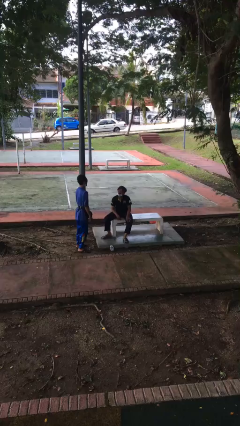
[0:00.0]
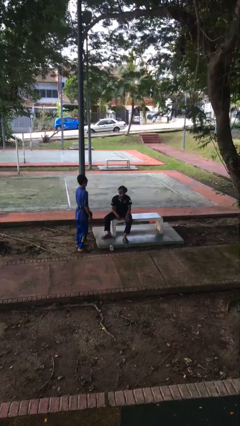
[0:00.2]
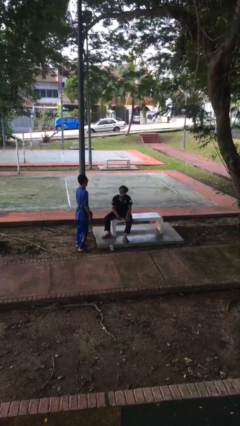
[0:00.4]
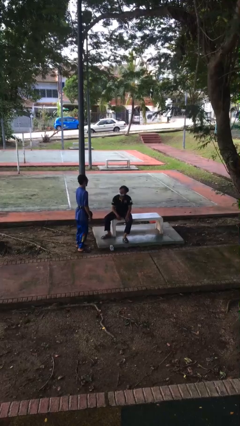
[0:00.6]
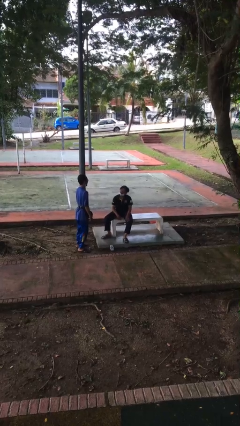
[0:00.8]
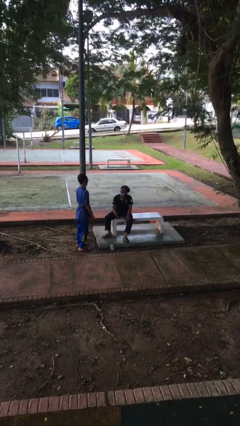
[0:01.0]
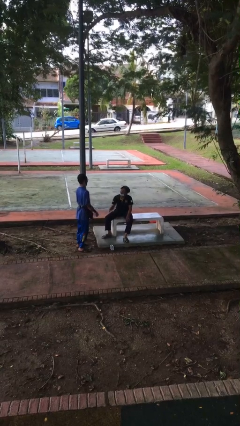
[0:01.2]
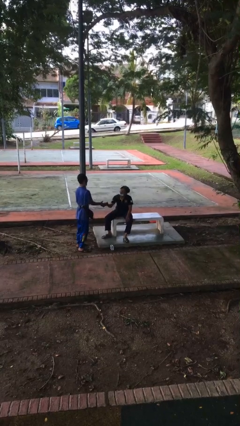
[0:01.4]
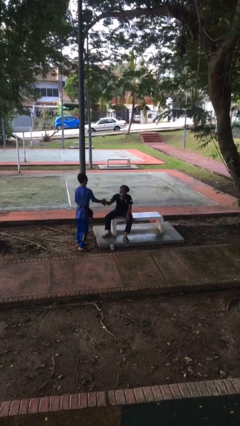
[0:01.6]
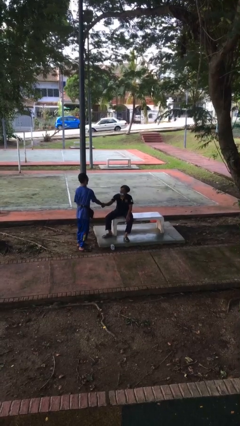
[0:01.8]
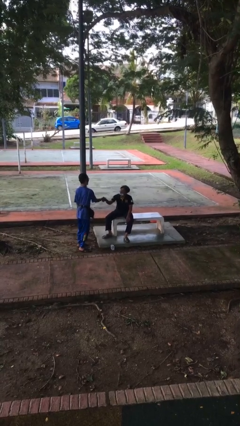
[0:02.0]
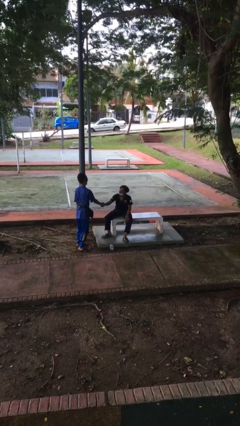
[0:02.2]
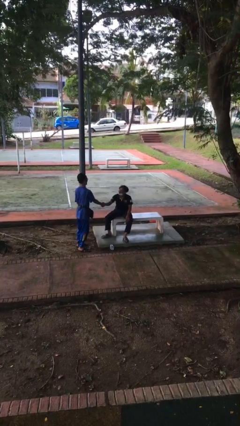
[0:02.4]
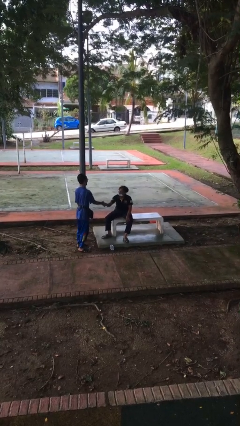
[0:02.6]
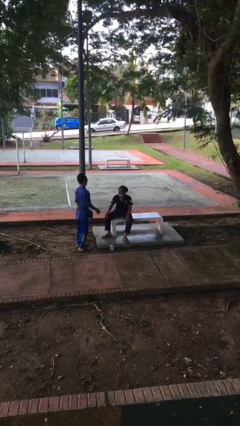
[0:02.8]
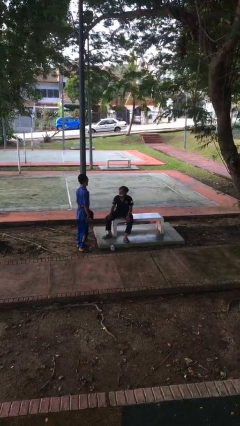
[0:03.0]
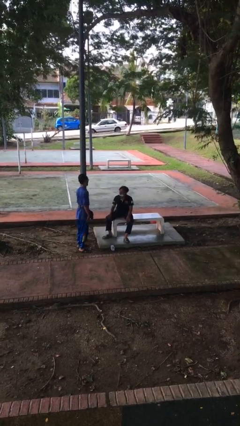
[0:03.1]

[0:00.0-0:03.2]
person shakes hand

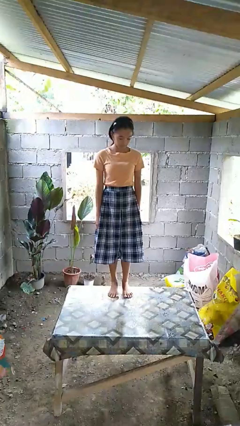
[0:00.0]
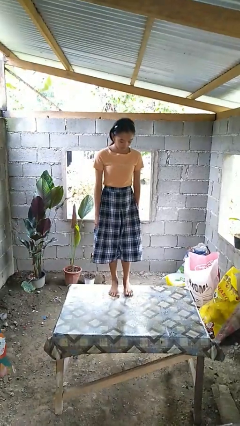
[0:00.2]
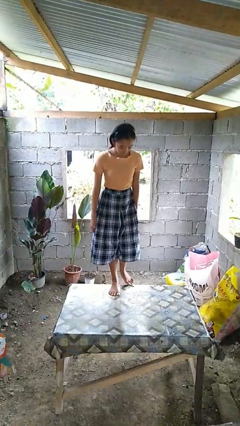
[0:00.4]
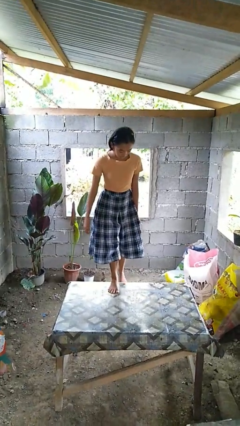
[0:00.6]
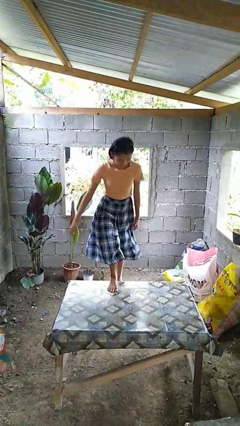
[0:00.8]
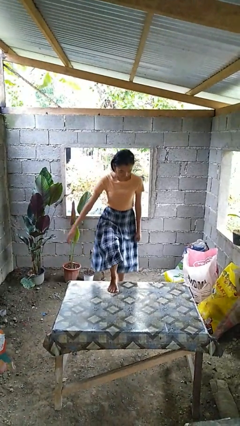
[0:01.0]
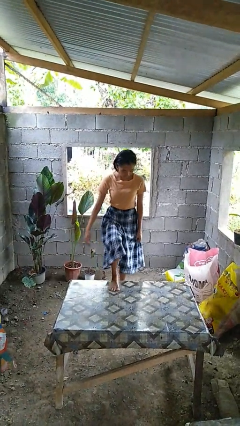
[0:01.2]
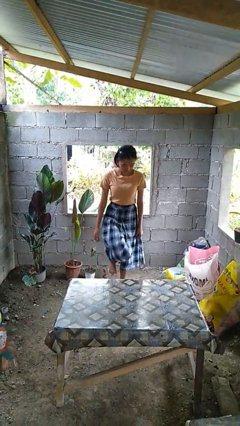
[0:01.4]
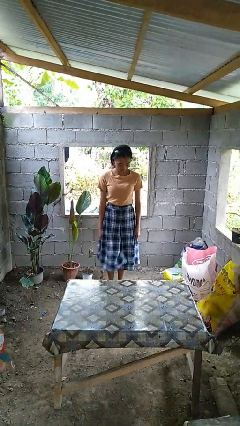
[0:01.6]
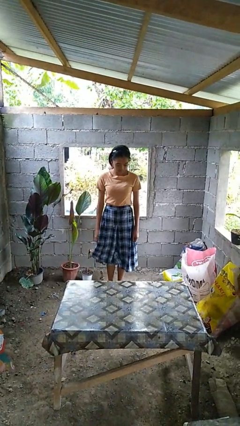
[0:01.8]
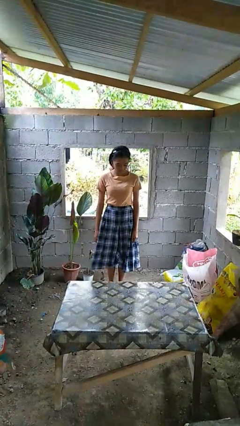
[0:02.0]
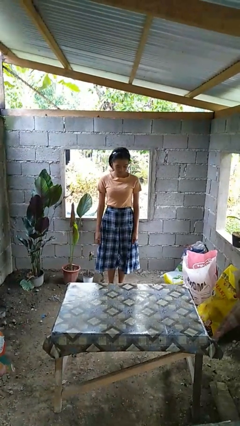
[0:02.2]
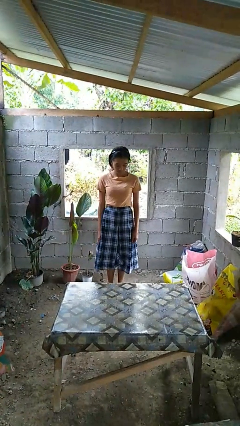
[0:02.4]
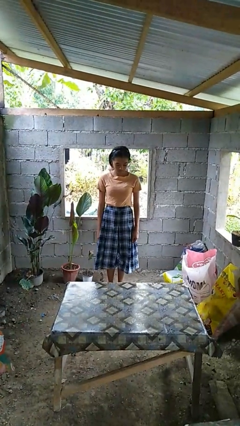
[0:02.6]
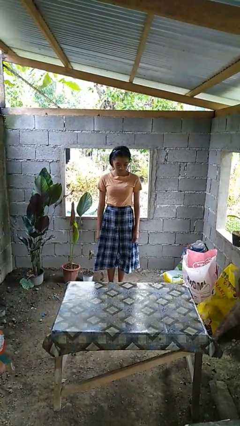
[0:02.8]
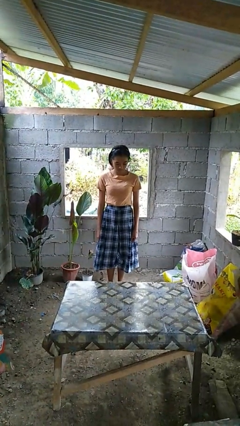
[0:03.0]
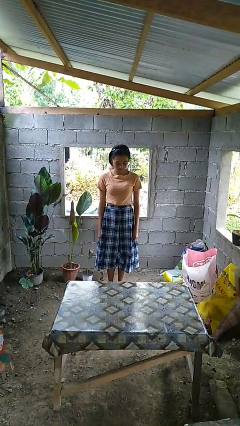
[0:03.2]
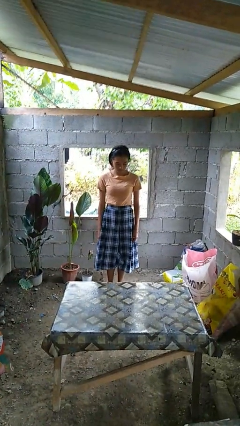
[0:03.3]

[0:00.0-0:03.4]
person climbs off table

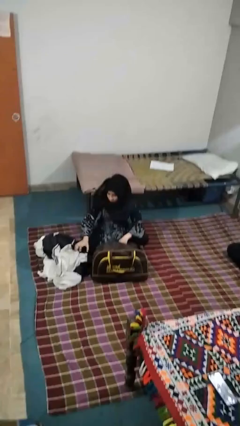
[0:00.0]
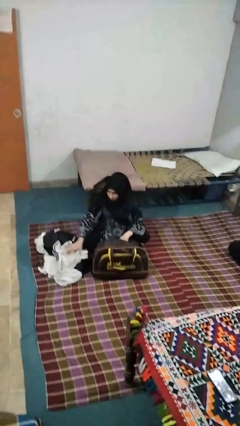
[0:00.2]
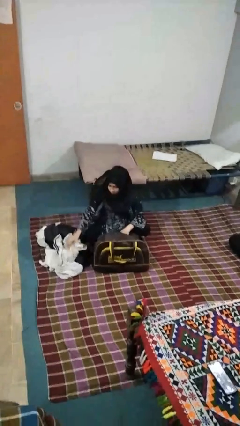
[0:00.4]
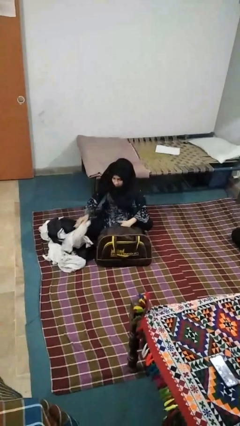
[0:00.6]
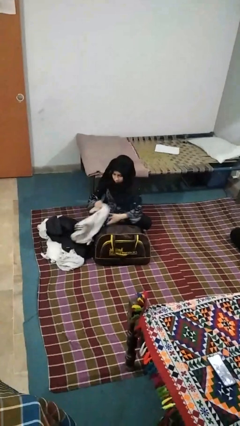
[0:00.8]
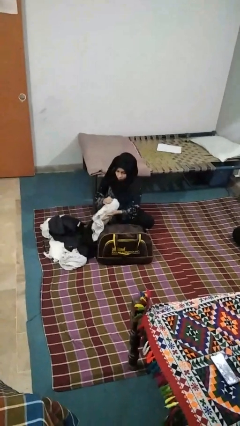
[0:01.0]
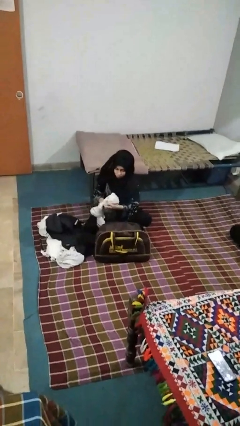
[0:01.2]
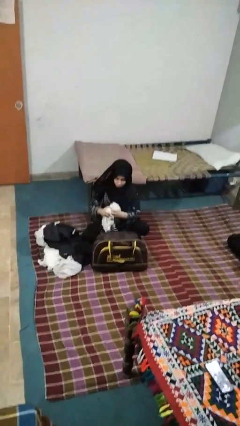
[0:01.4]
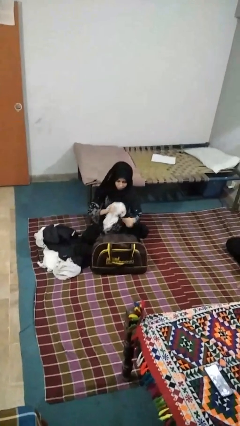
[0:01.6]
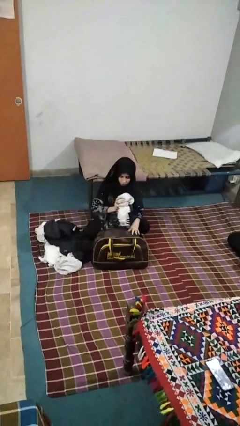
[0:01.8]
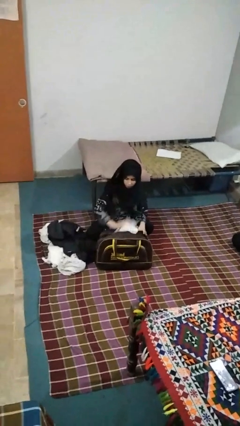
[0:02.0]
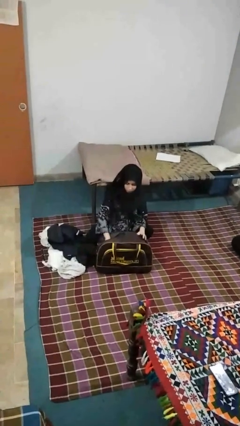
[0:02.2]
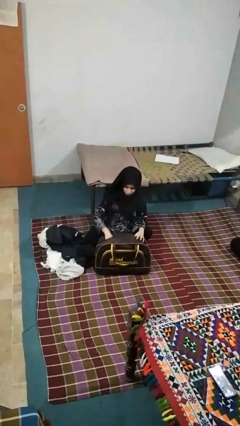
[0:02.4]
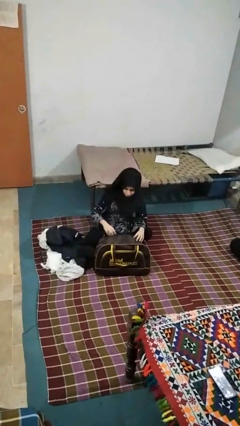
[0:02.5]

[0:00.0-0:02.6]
person loads clothes into suitcase

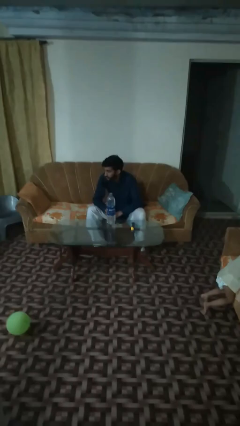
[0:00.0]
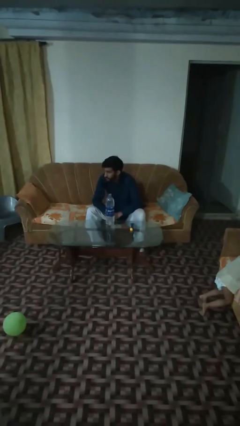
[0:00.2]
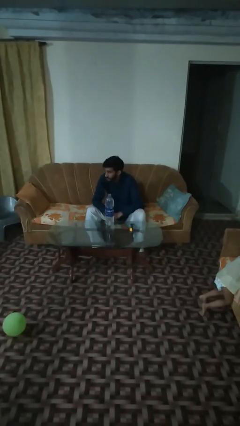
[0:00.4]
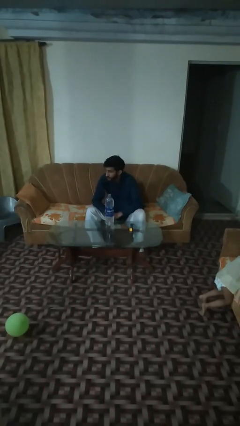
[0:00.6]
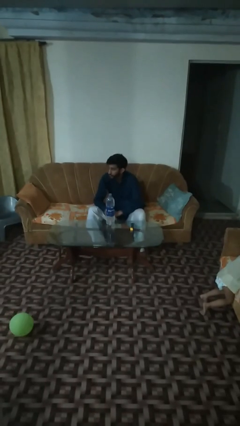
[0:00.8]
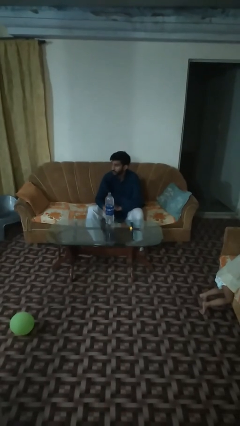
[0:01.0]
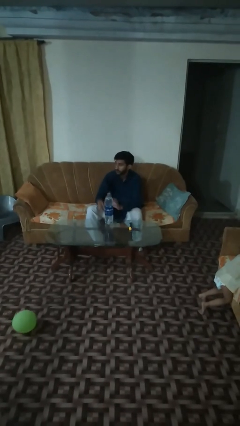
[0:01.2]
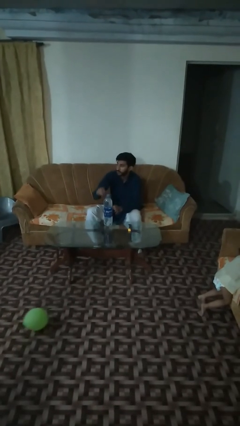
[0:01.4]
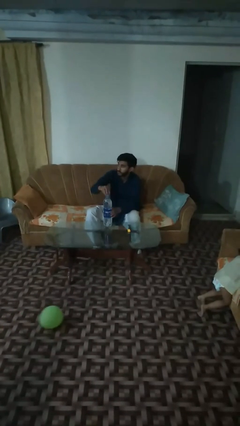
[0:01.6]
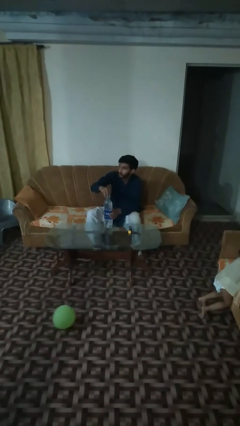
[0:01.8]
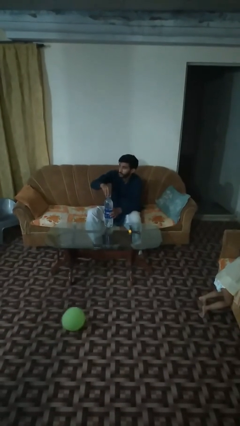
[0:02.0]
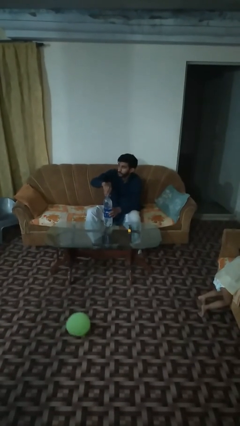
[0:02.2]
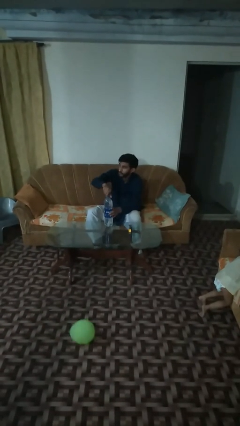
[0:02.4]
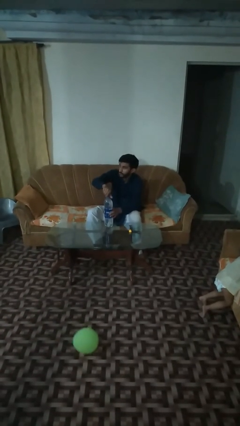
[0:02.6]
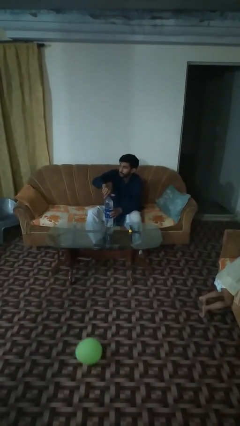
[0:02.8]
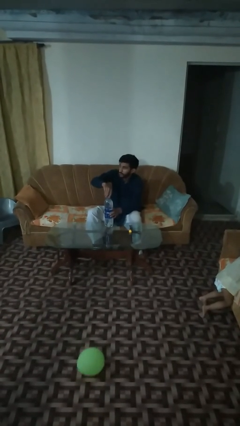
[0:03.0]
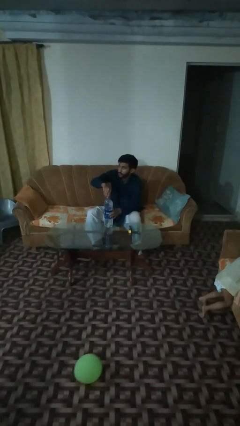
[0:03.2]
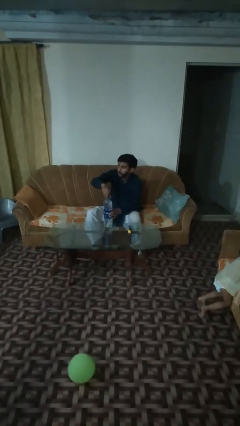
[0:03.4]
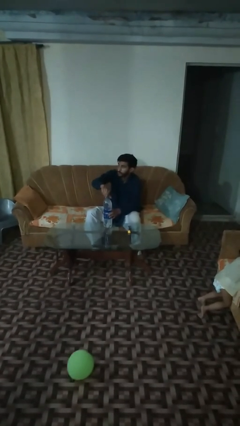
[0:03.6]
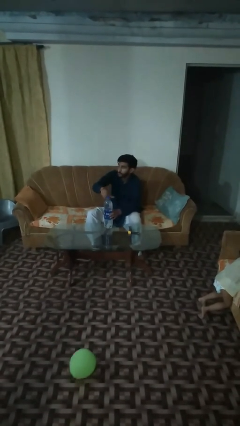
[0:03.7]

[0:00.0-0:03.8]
person screws lid to bottle

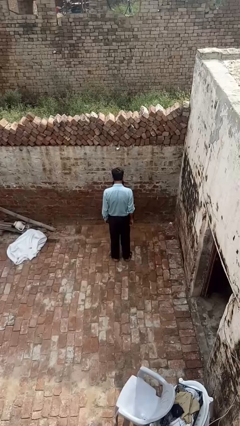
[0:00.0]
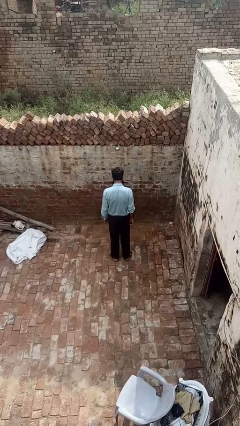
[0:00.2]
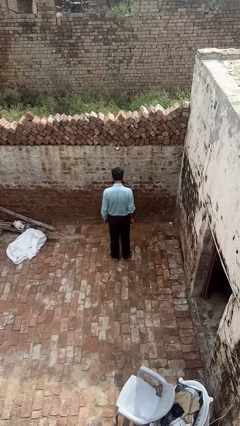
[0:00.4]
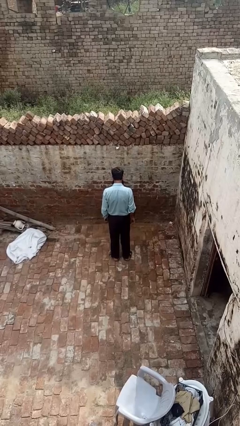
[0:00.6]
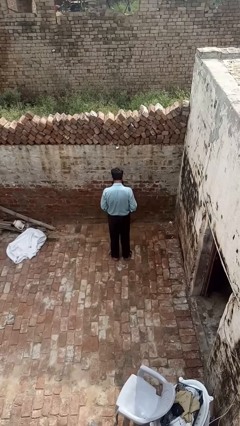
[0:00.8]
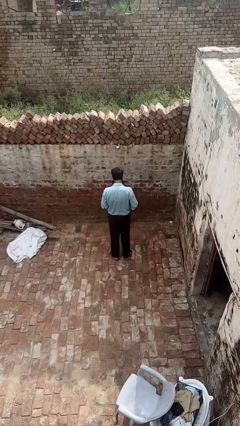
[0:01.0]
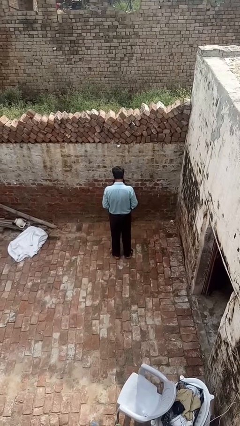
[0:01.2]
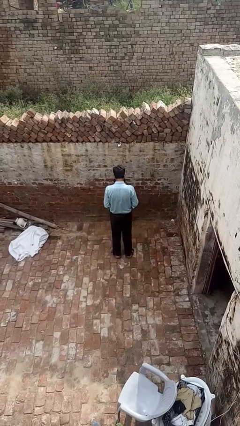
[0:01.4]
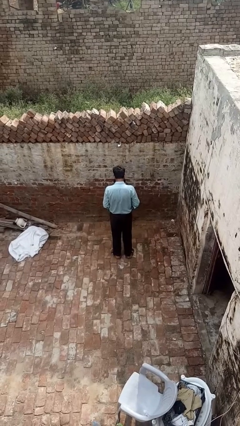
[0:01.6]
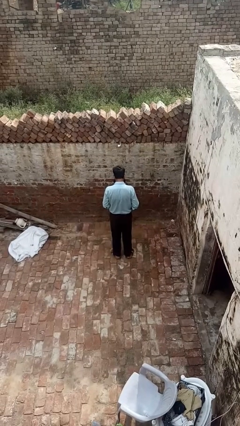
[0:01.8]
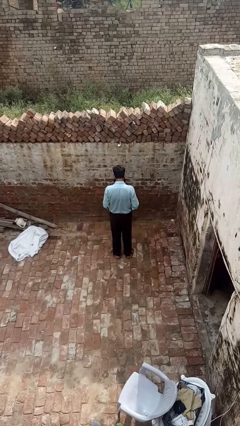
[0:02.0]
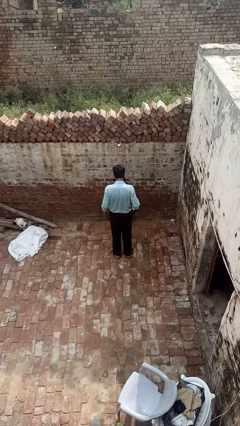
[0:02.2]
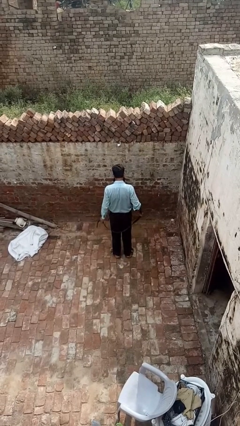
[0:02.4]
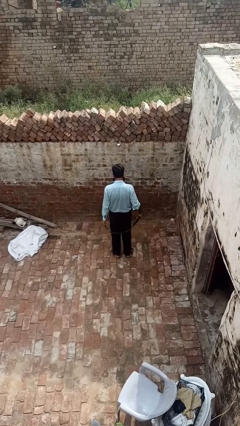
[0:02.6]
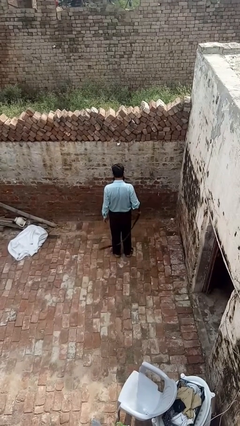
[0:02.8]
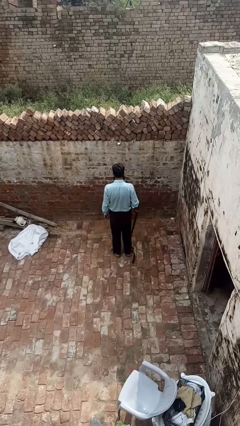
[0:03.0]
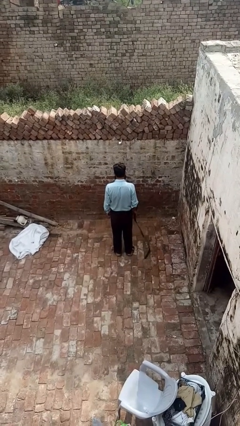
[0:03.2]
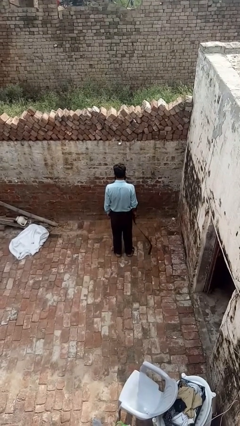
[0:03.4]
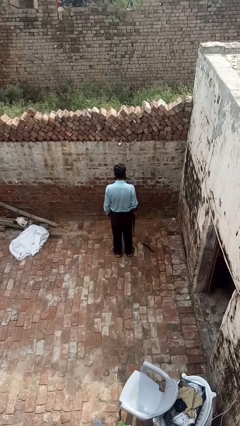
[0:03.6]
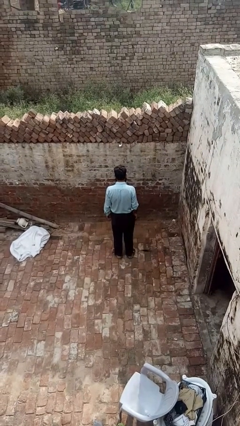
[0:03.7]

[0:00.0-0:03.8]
person takes off belt

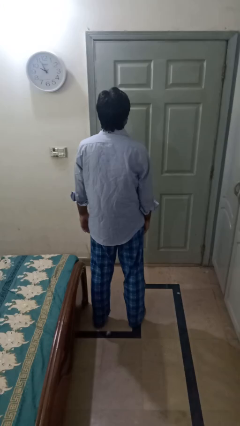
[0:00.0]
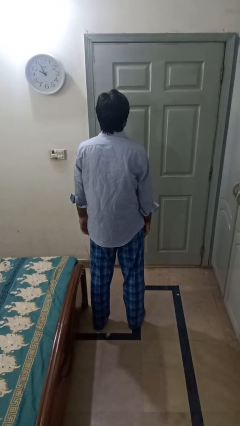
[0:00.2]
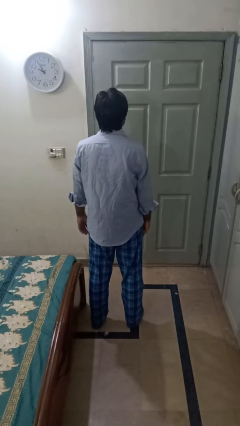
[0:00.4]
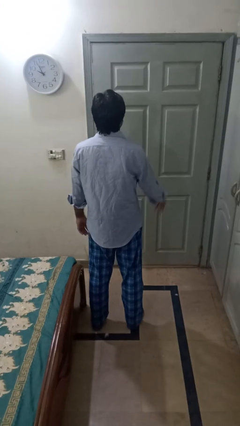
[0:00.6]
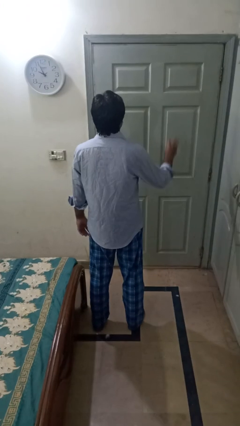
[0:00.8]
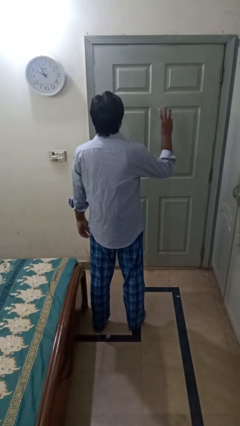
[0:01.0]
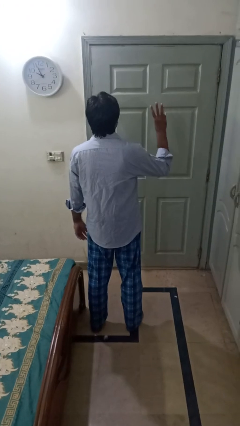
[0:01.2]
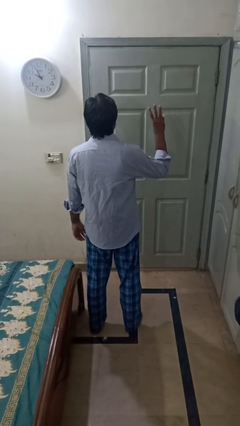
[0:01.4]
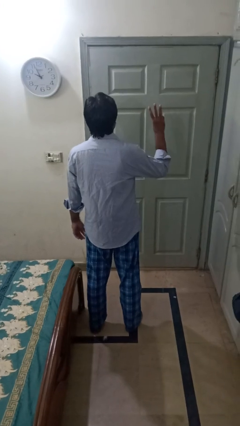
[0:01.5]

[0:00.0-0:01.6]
person gestures number three
